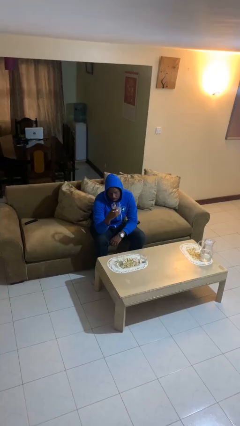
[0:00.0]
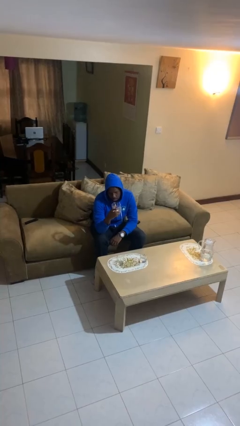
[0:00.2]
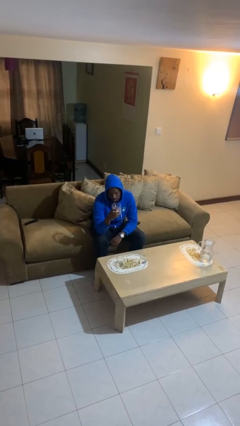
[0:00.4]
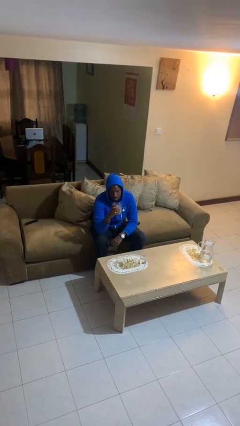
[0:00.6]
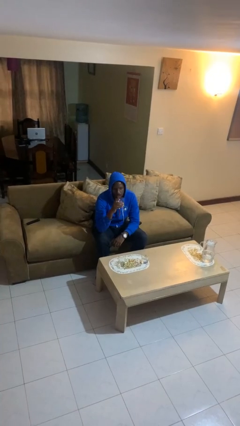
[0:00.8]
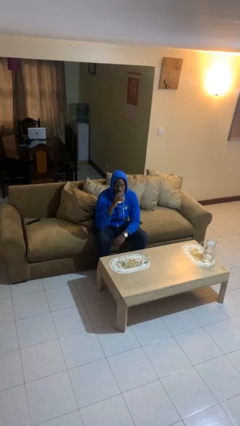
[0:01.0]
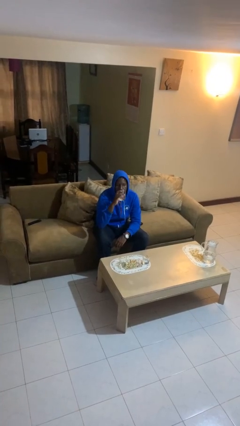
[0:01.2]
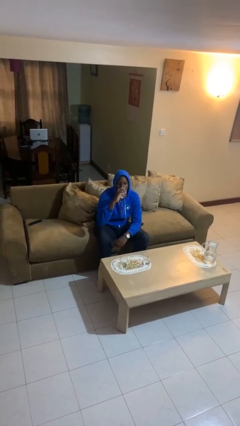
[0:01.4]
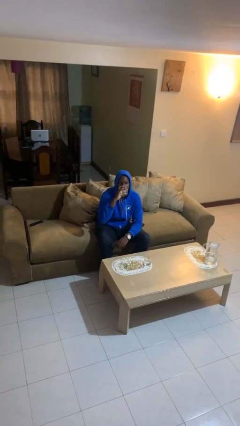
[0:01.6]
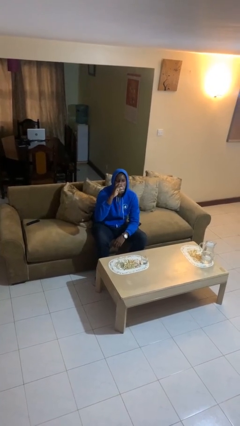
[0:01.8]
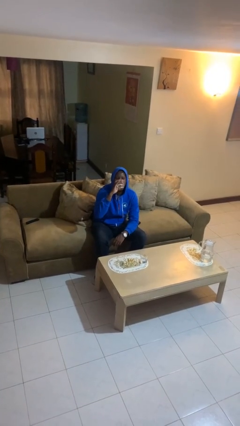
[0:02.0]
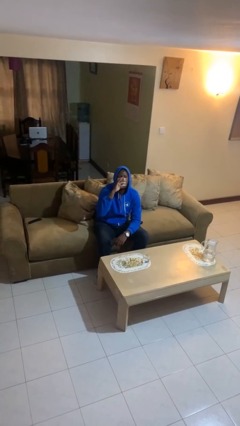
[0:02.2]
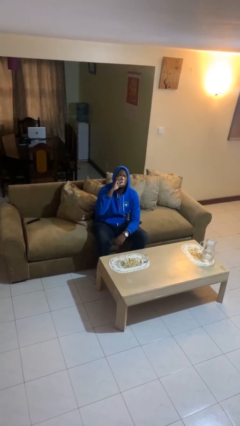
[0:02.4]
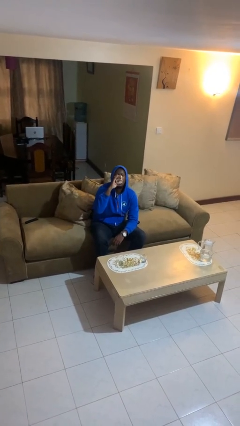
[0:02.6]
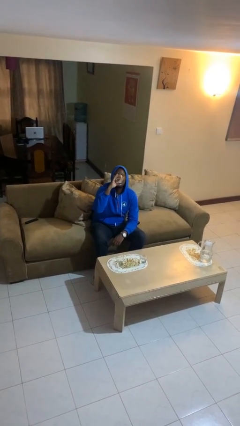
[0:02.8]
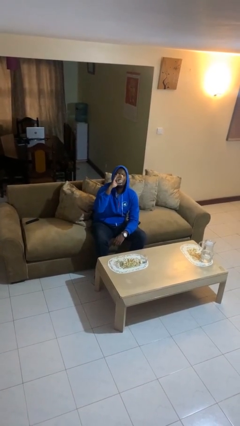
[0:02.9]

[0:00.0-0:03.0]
person drinks from shotglass

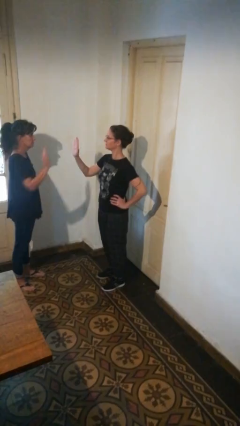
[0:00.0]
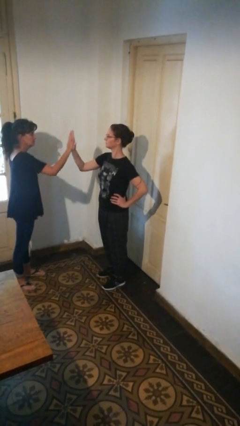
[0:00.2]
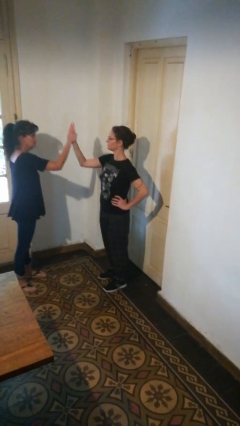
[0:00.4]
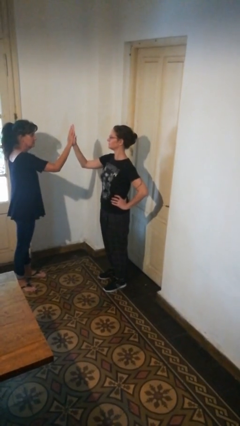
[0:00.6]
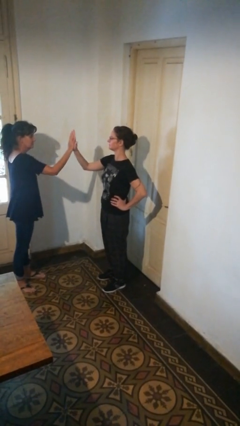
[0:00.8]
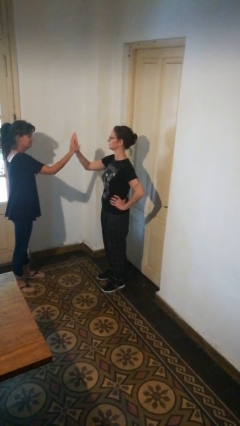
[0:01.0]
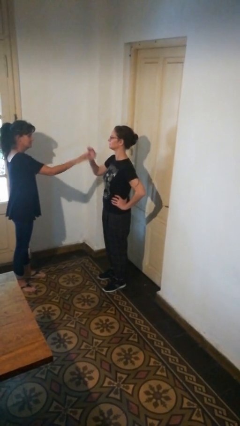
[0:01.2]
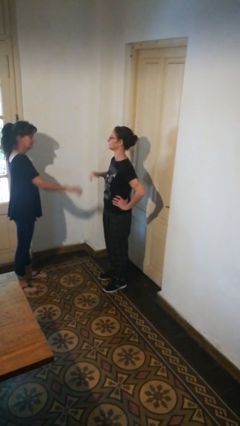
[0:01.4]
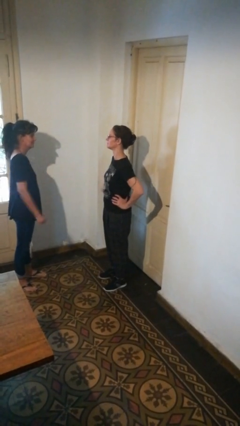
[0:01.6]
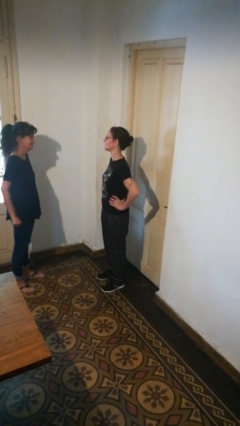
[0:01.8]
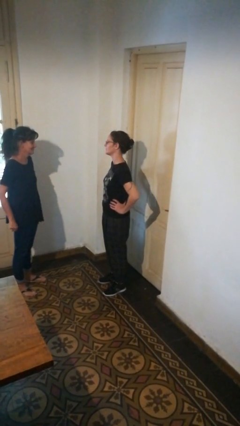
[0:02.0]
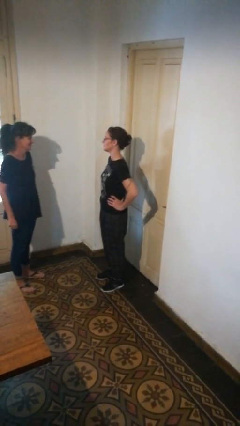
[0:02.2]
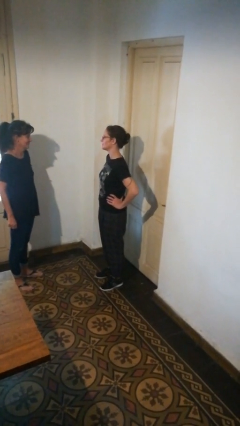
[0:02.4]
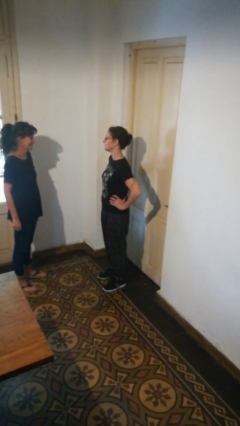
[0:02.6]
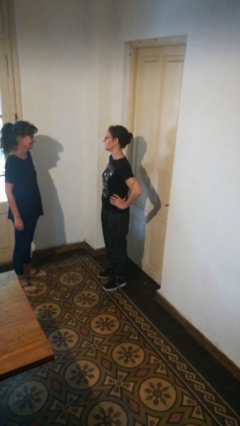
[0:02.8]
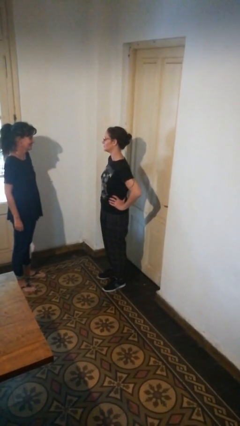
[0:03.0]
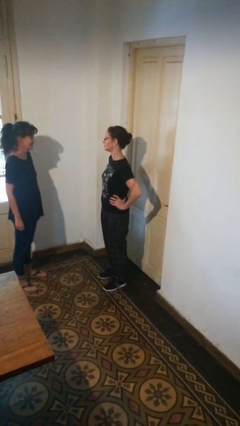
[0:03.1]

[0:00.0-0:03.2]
person highfives hand

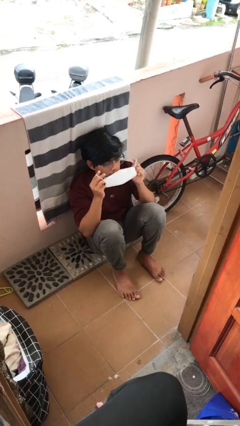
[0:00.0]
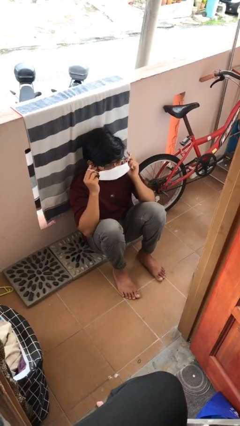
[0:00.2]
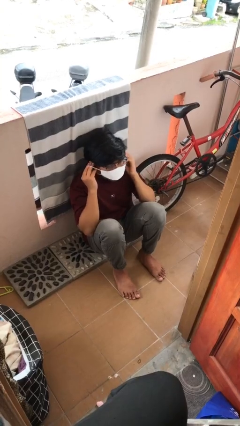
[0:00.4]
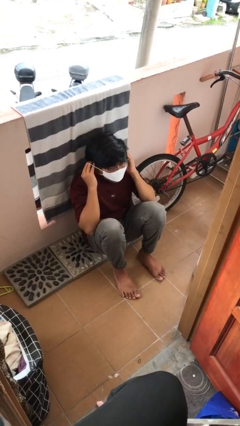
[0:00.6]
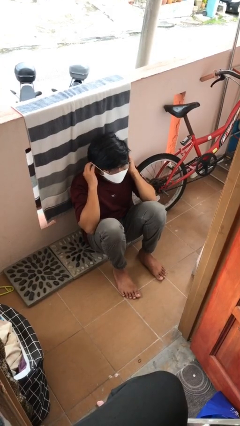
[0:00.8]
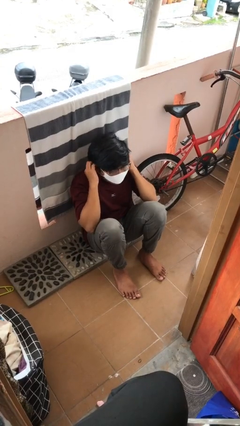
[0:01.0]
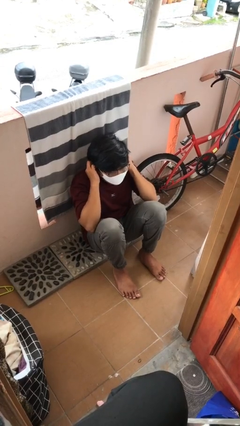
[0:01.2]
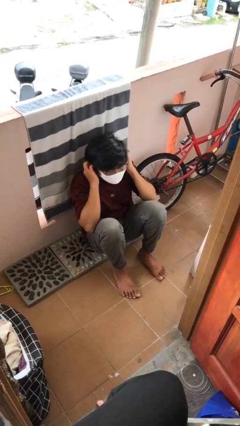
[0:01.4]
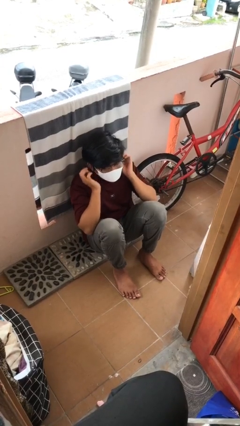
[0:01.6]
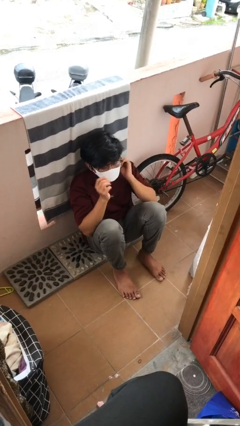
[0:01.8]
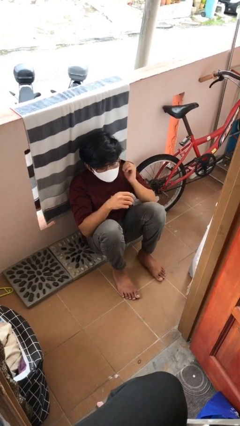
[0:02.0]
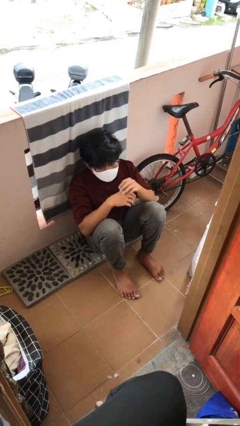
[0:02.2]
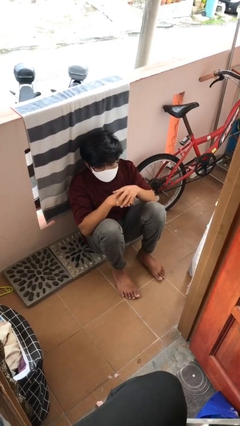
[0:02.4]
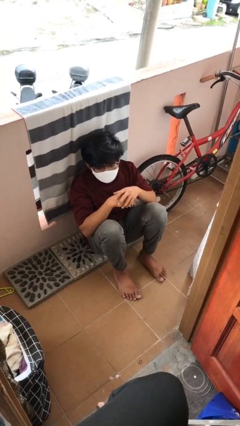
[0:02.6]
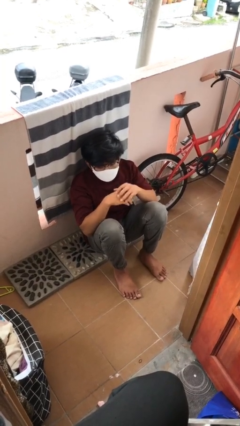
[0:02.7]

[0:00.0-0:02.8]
person puts on facemask

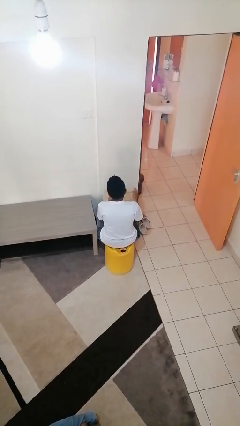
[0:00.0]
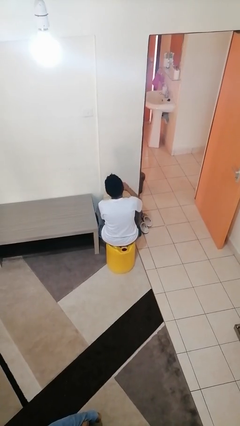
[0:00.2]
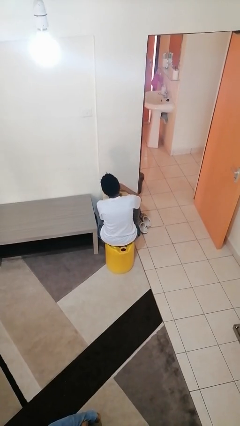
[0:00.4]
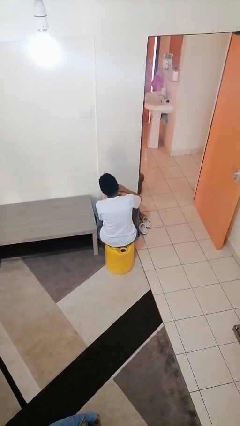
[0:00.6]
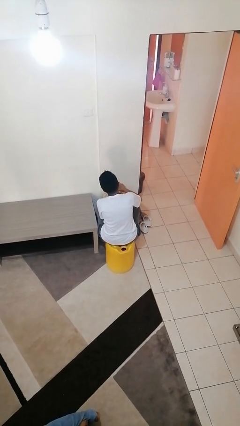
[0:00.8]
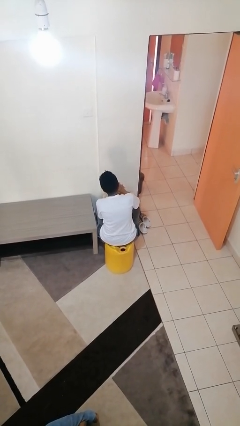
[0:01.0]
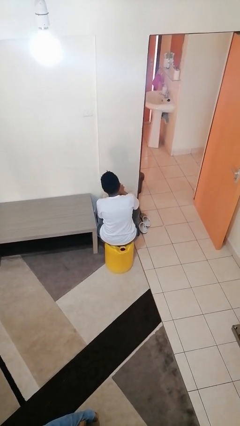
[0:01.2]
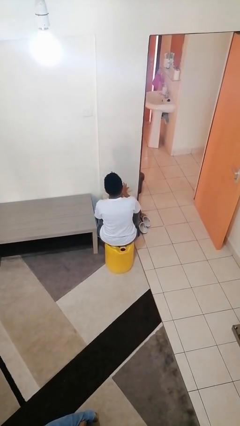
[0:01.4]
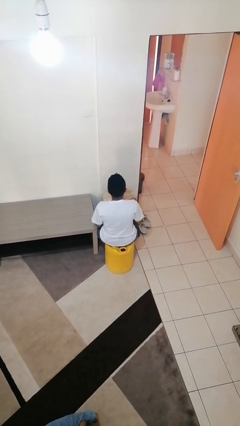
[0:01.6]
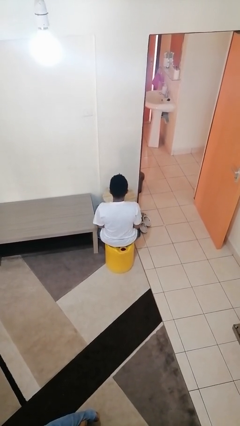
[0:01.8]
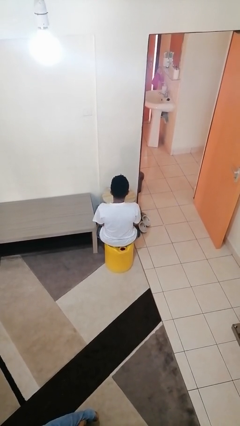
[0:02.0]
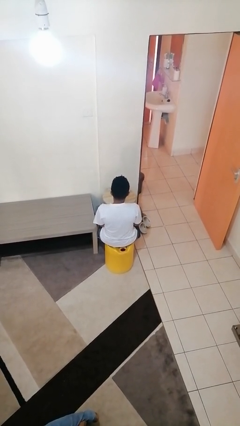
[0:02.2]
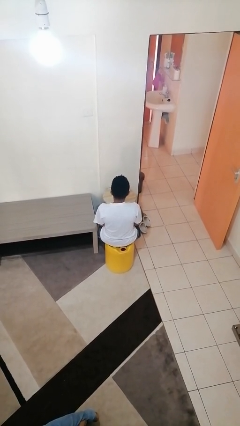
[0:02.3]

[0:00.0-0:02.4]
person closes jar

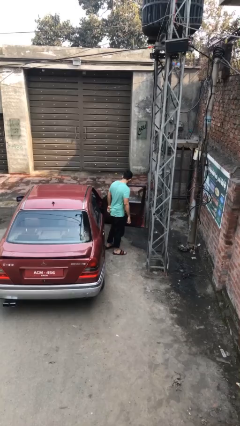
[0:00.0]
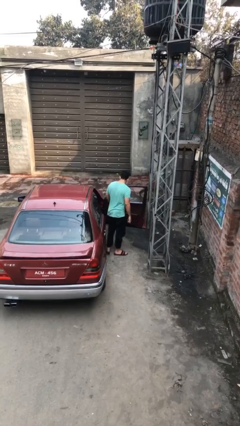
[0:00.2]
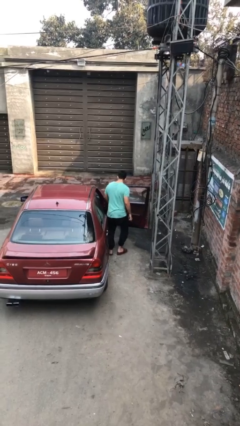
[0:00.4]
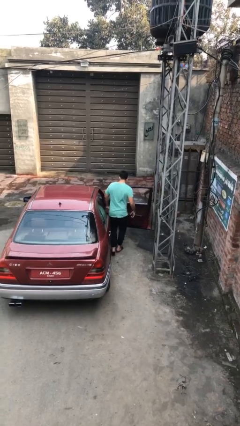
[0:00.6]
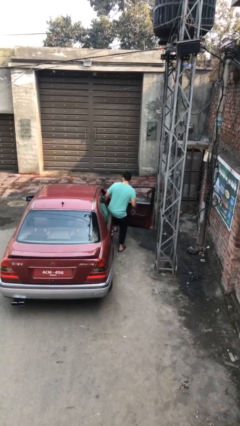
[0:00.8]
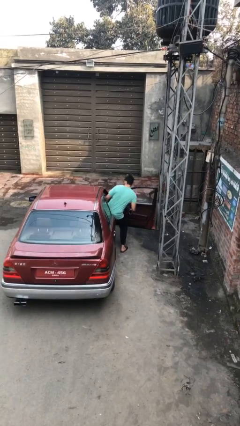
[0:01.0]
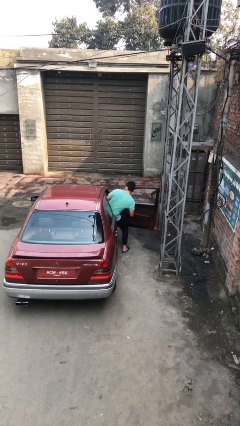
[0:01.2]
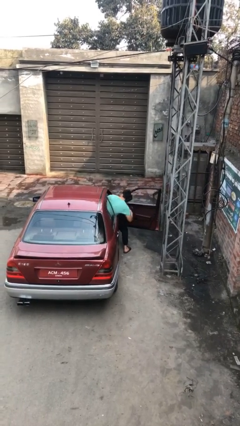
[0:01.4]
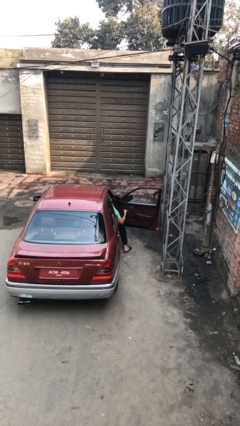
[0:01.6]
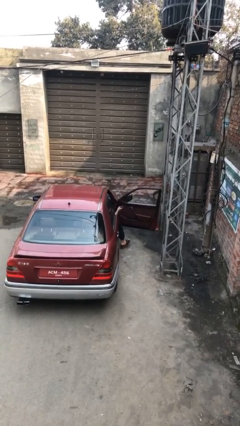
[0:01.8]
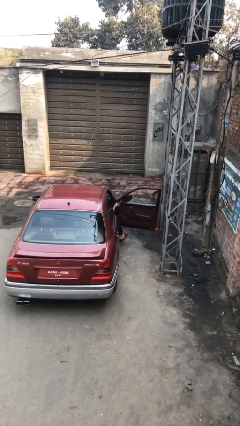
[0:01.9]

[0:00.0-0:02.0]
person enters car

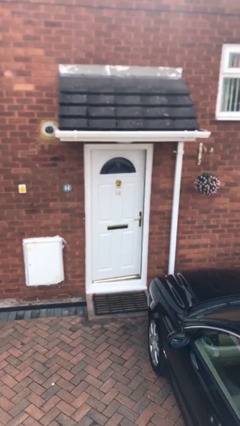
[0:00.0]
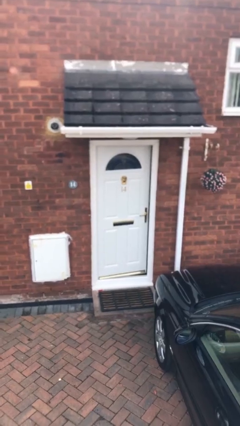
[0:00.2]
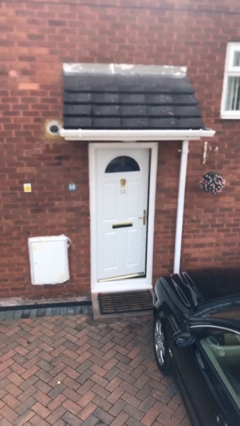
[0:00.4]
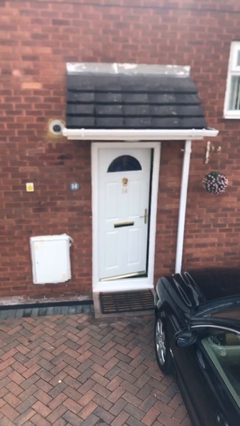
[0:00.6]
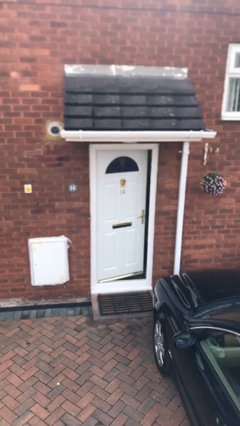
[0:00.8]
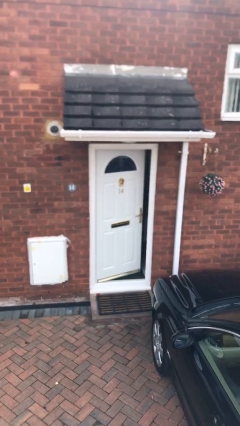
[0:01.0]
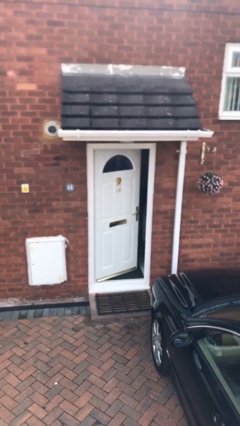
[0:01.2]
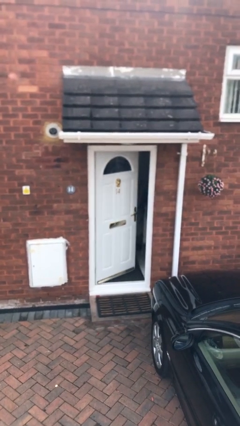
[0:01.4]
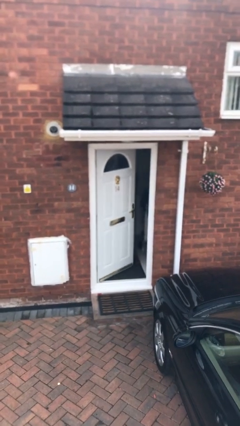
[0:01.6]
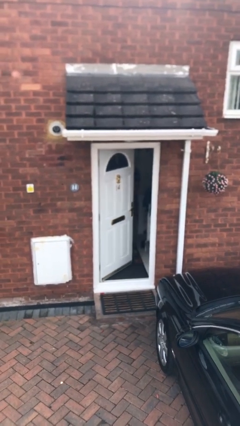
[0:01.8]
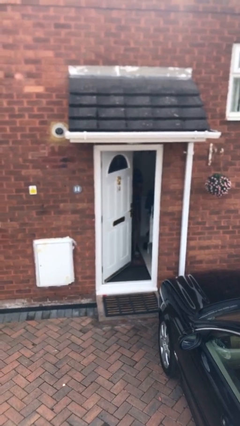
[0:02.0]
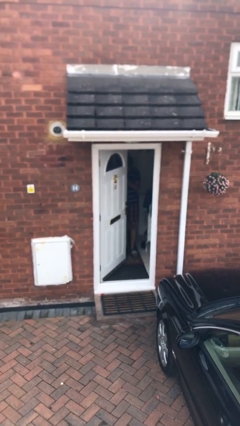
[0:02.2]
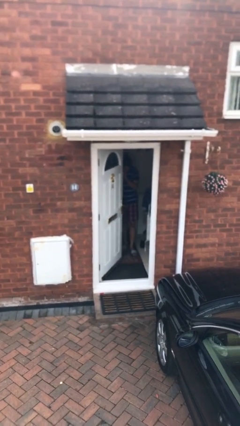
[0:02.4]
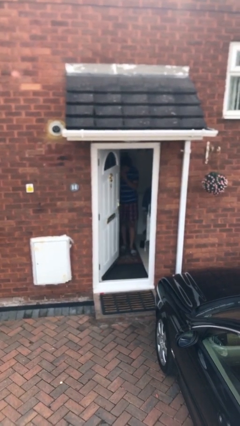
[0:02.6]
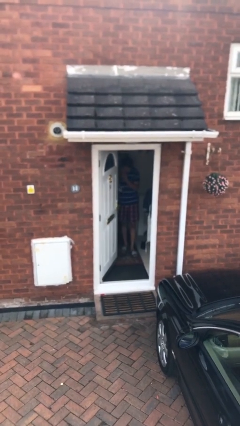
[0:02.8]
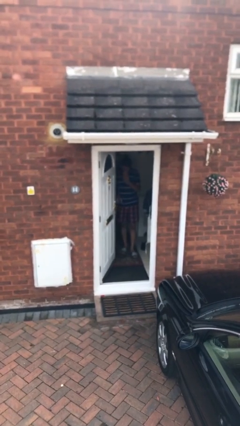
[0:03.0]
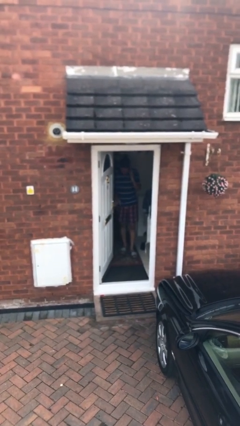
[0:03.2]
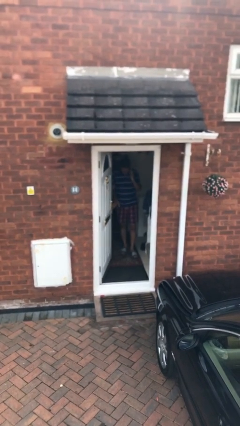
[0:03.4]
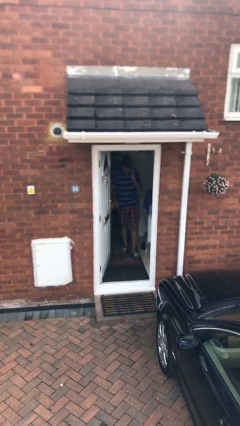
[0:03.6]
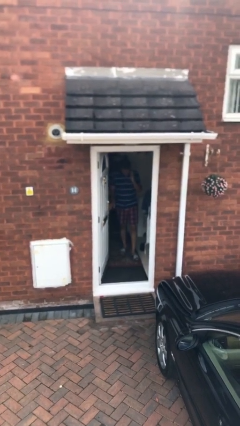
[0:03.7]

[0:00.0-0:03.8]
person opens facility door
